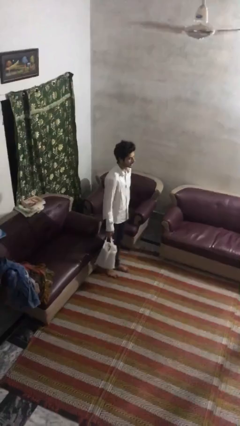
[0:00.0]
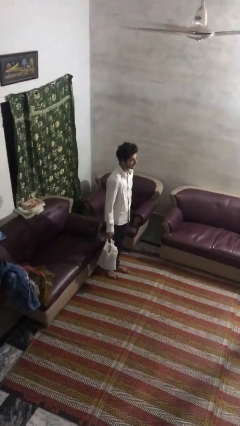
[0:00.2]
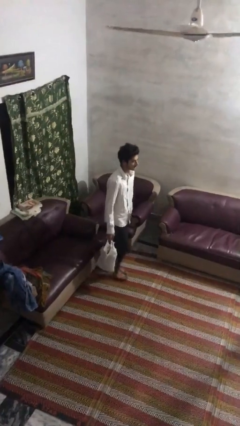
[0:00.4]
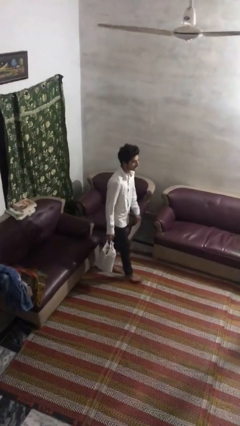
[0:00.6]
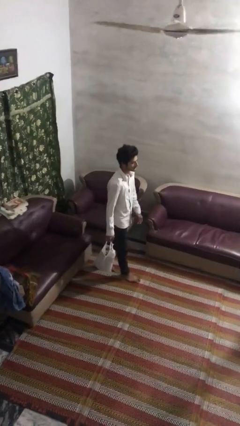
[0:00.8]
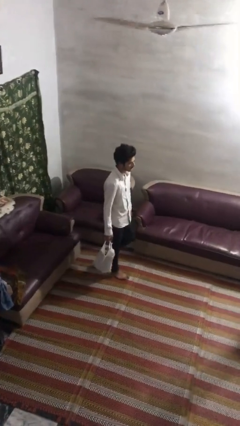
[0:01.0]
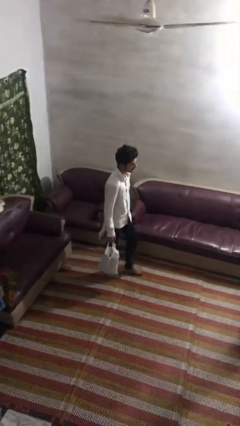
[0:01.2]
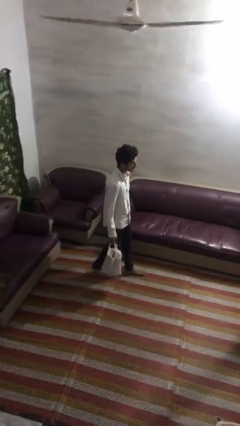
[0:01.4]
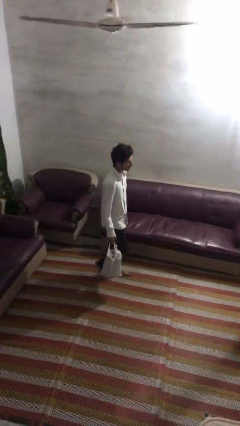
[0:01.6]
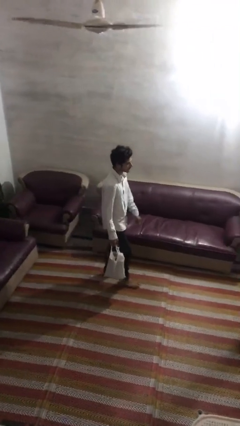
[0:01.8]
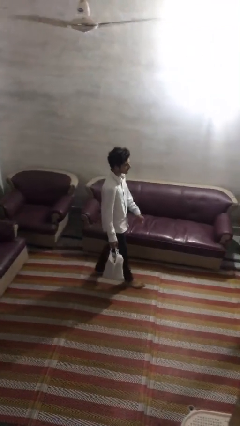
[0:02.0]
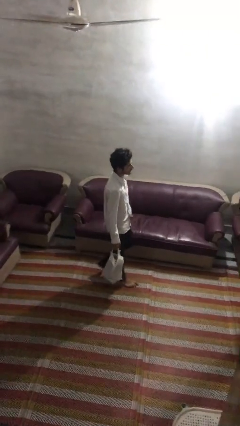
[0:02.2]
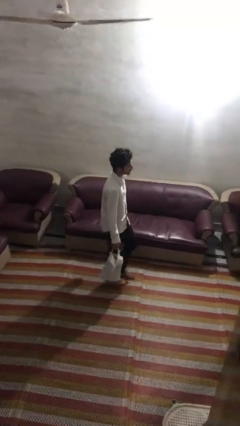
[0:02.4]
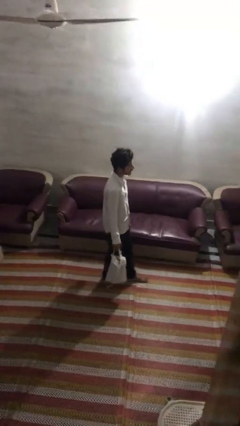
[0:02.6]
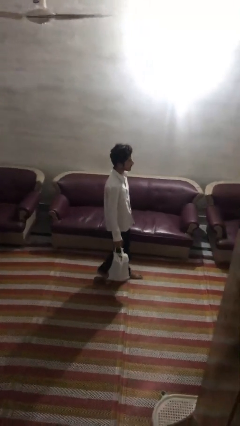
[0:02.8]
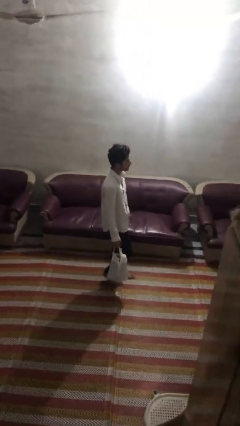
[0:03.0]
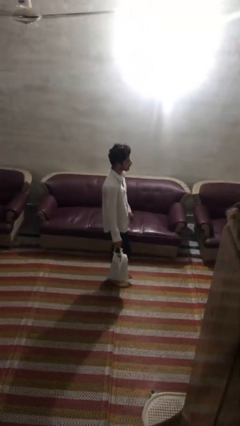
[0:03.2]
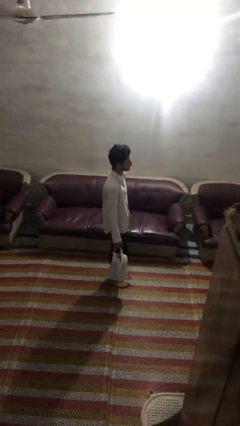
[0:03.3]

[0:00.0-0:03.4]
person carries groceries

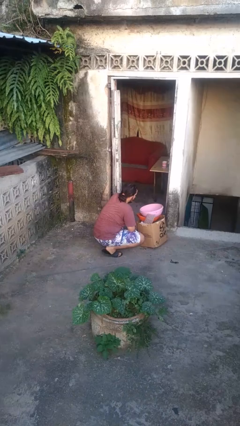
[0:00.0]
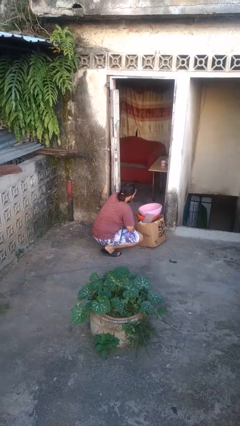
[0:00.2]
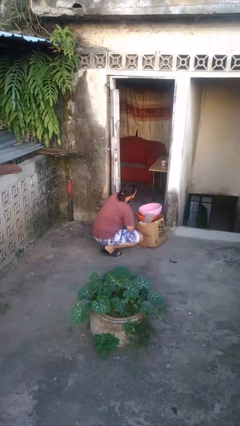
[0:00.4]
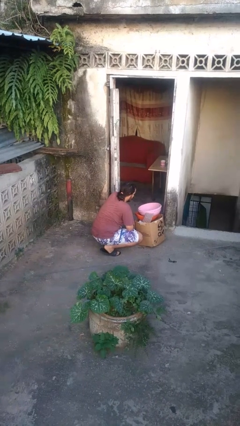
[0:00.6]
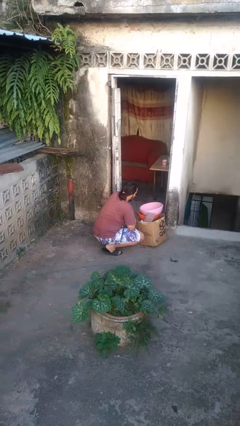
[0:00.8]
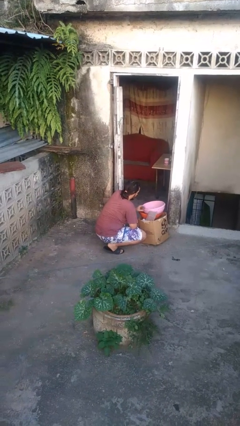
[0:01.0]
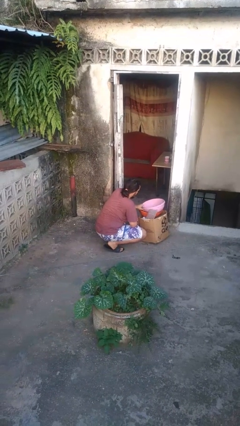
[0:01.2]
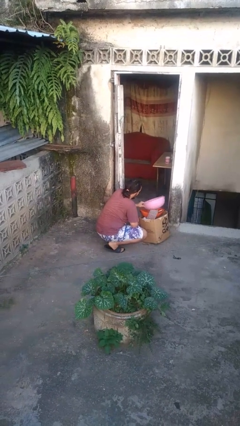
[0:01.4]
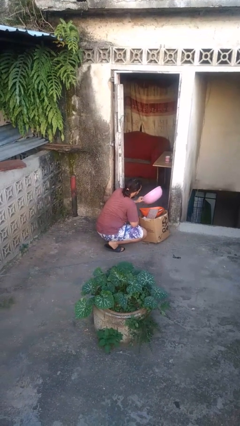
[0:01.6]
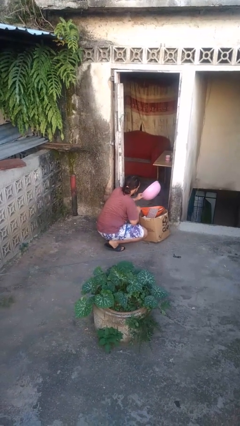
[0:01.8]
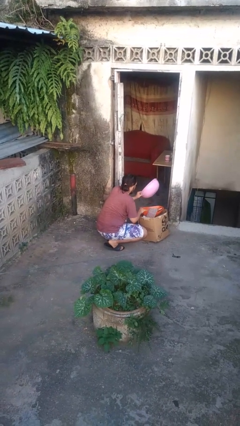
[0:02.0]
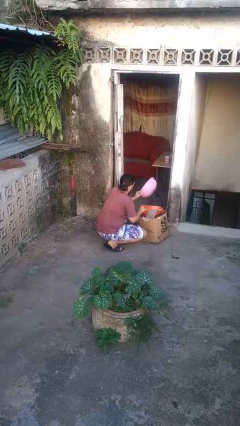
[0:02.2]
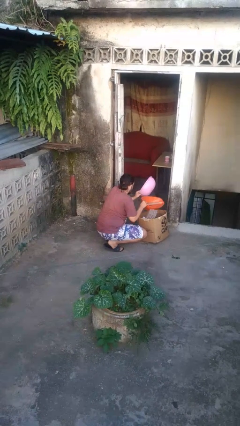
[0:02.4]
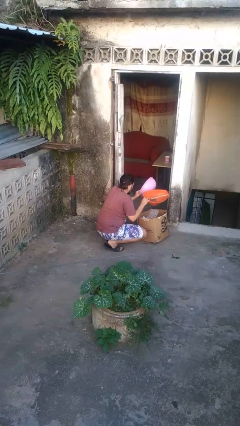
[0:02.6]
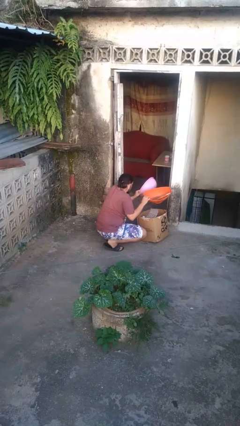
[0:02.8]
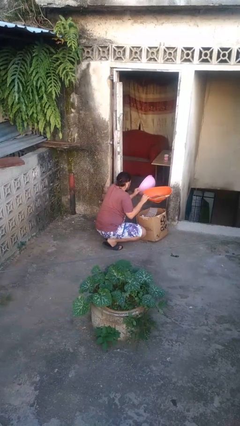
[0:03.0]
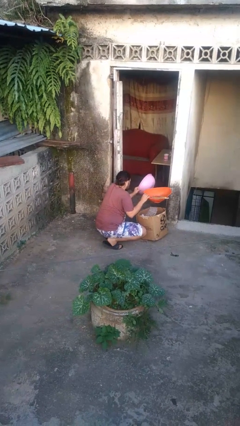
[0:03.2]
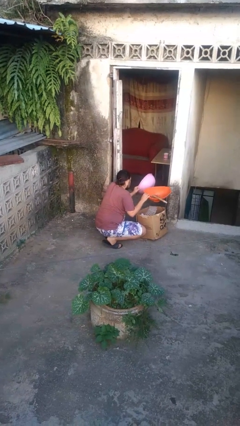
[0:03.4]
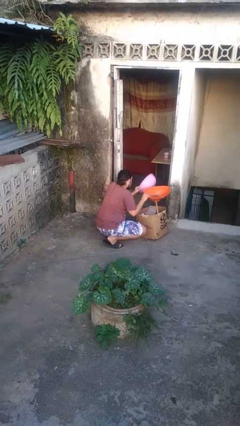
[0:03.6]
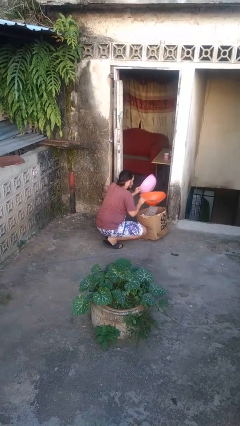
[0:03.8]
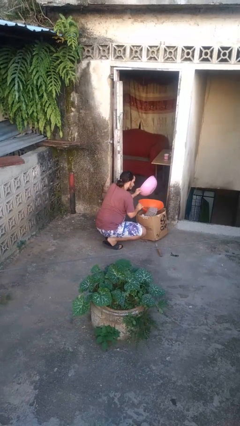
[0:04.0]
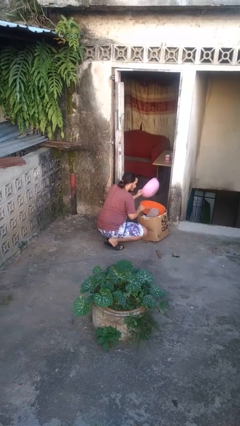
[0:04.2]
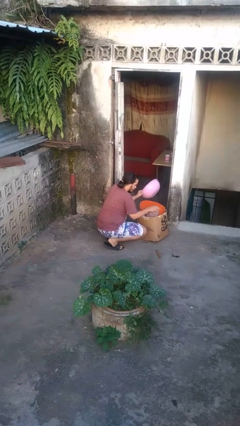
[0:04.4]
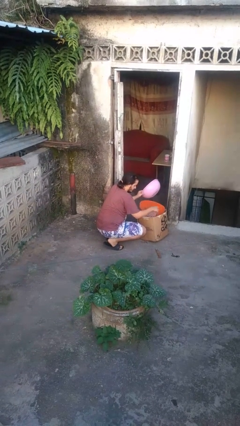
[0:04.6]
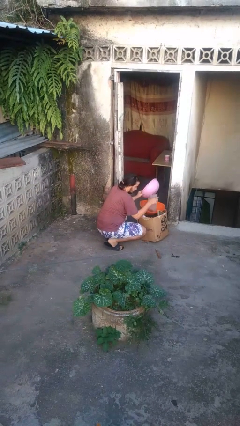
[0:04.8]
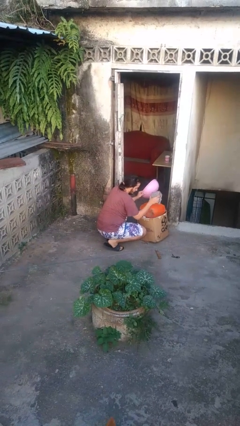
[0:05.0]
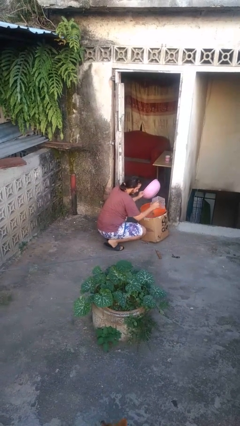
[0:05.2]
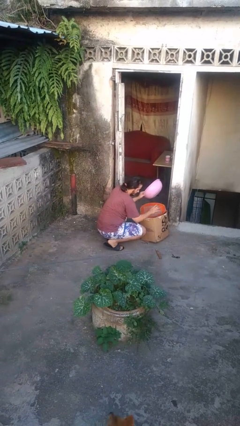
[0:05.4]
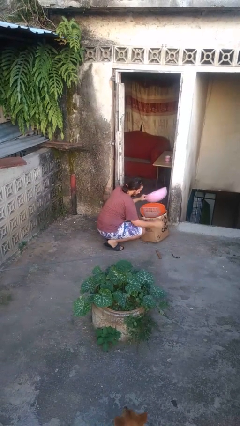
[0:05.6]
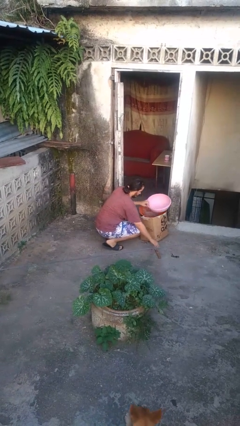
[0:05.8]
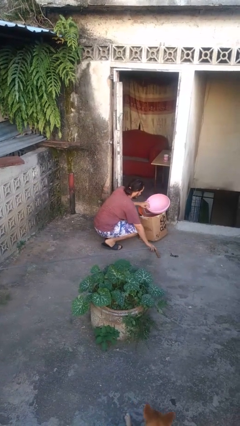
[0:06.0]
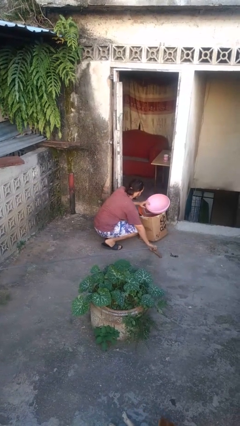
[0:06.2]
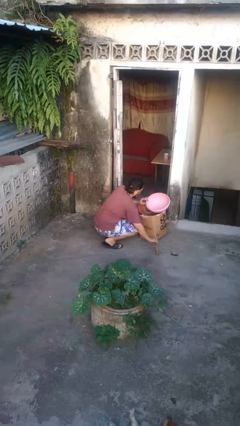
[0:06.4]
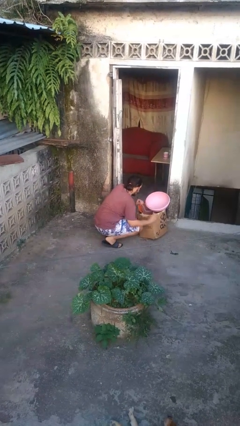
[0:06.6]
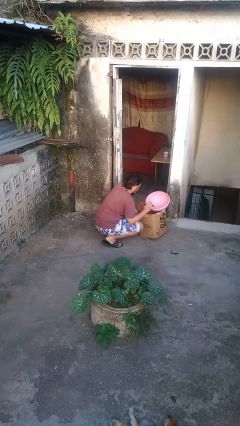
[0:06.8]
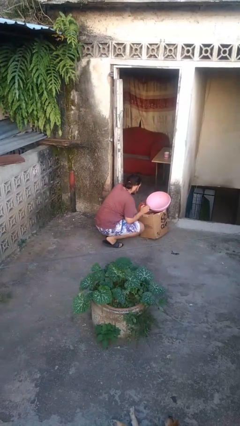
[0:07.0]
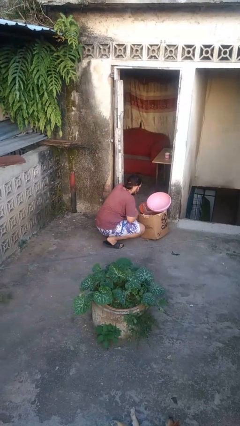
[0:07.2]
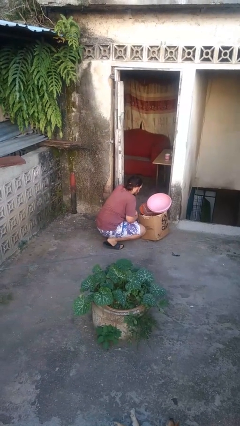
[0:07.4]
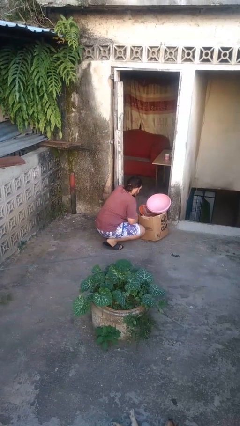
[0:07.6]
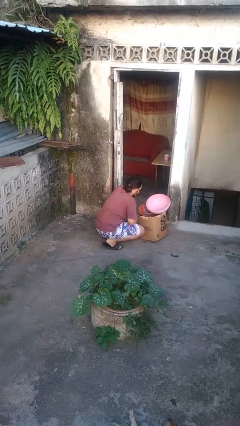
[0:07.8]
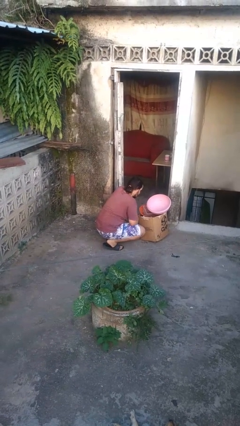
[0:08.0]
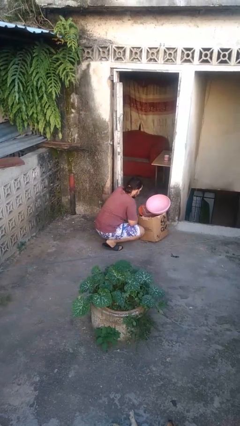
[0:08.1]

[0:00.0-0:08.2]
person searches in box

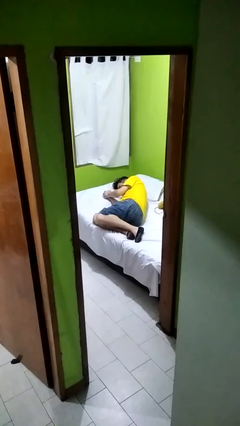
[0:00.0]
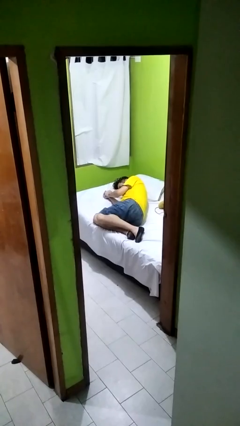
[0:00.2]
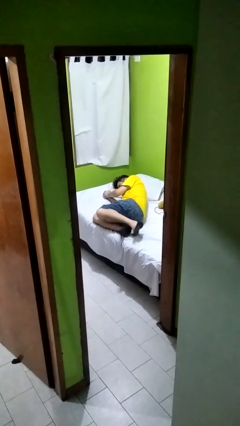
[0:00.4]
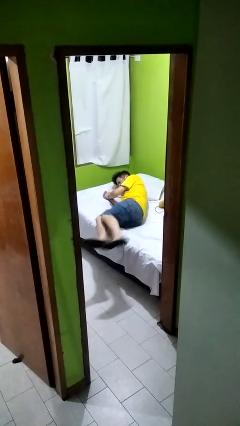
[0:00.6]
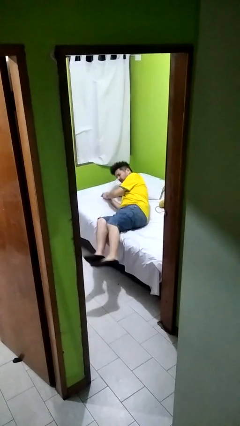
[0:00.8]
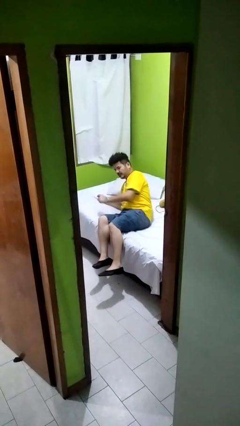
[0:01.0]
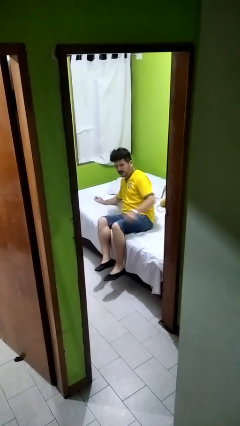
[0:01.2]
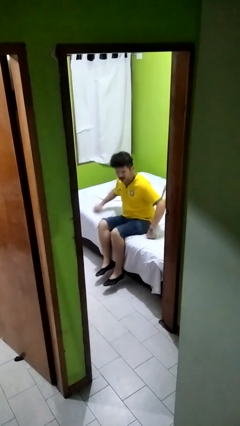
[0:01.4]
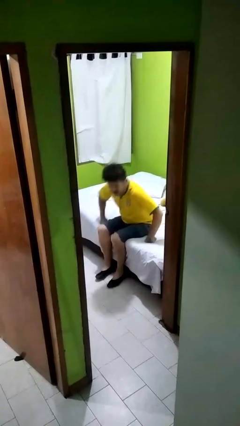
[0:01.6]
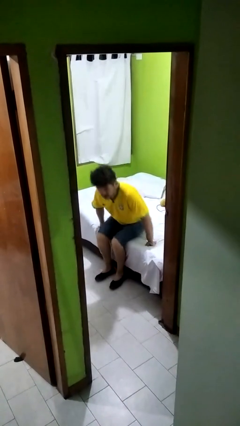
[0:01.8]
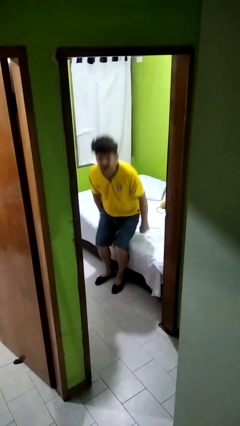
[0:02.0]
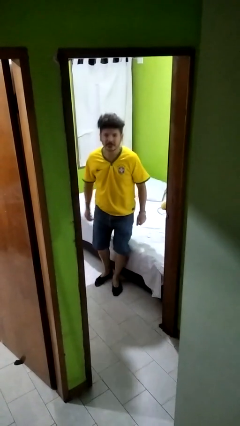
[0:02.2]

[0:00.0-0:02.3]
person stands up

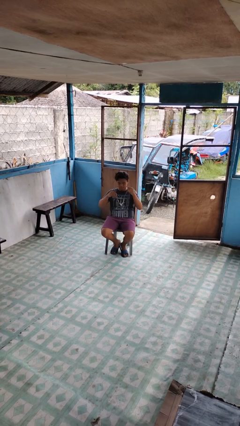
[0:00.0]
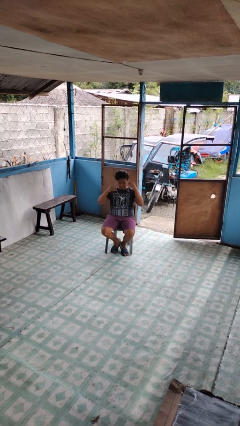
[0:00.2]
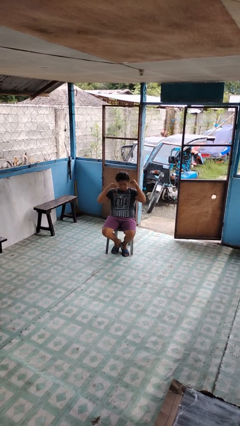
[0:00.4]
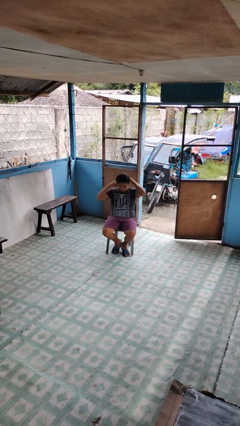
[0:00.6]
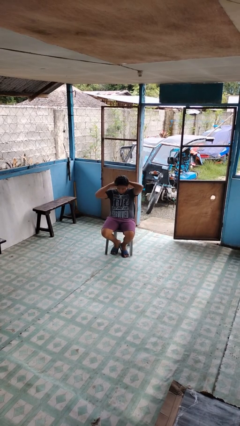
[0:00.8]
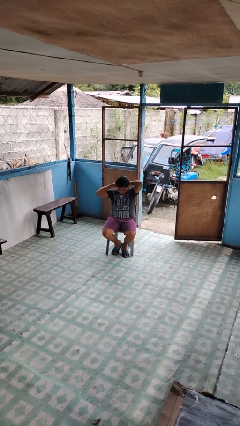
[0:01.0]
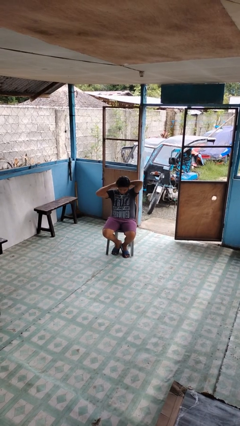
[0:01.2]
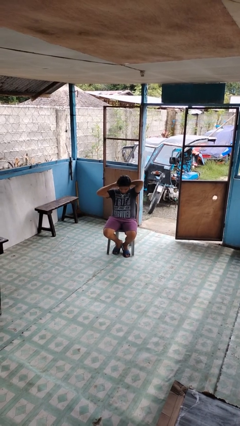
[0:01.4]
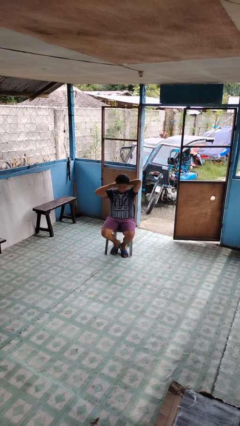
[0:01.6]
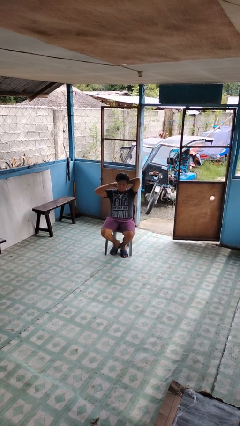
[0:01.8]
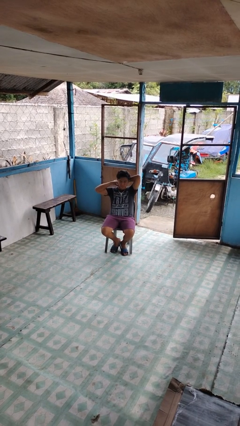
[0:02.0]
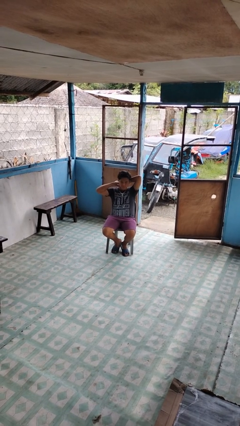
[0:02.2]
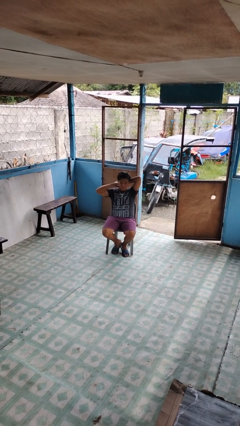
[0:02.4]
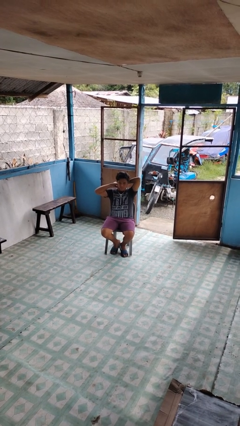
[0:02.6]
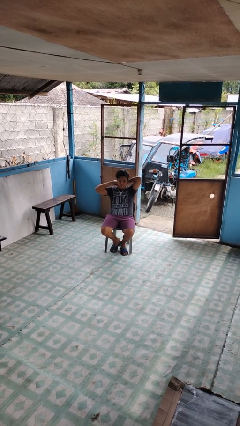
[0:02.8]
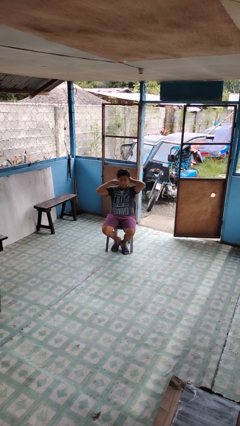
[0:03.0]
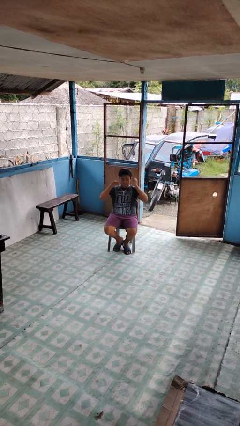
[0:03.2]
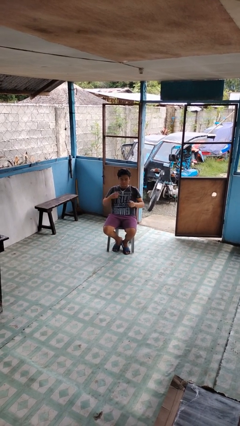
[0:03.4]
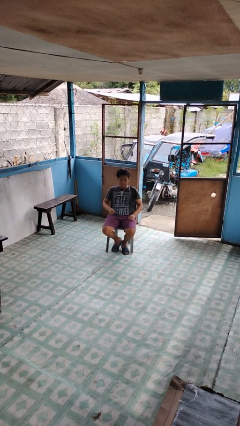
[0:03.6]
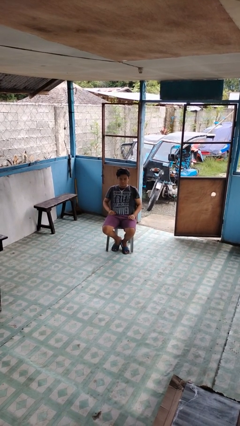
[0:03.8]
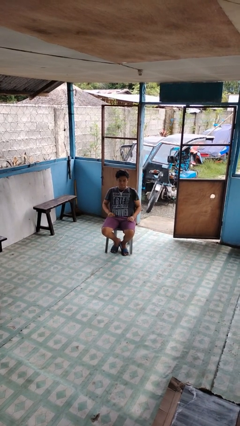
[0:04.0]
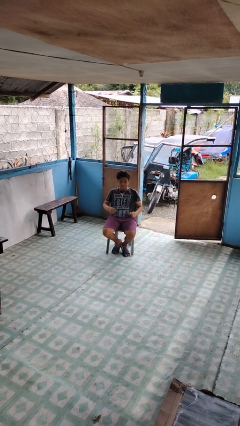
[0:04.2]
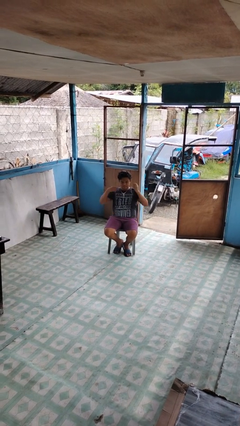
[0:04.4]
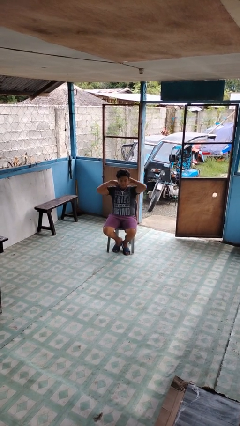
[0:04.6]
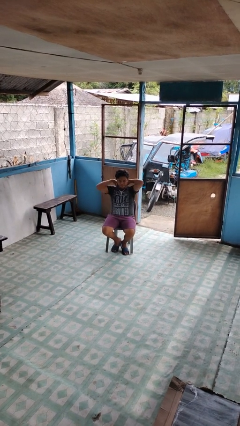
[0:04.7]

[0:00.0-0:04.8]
person puts on necklace
